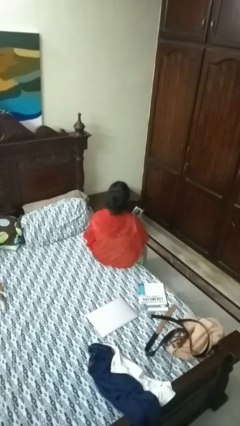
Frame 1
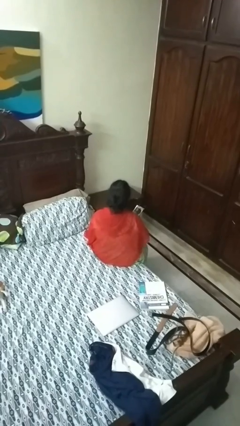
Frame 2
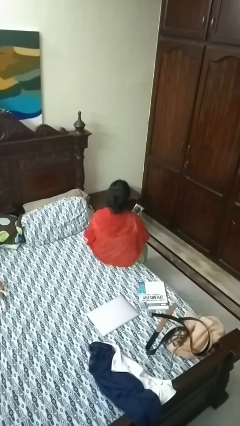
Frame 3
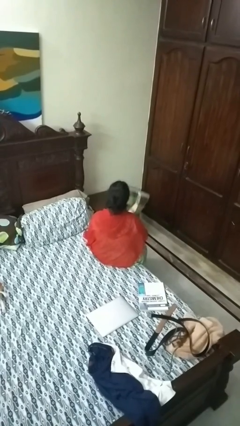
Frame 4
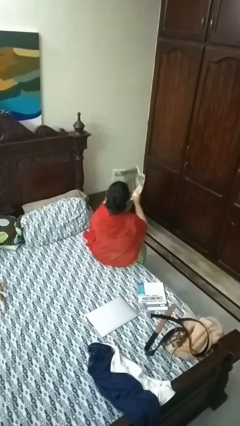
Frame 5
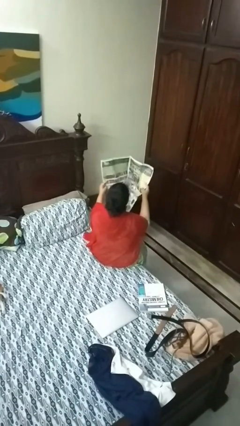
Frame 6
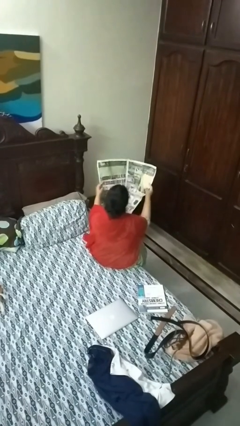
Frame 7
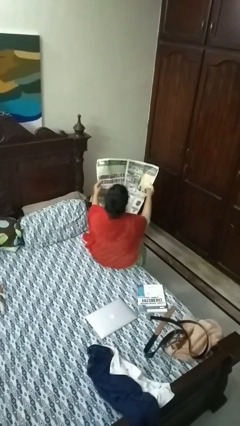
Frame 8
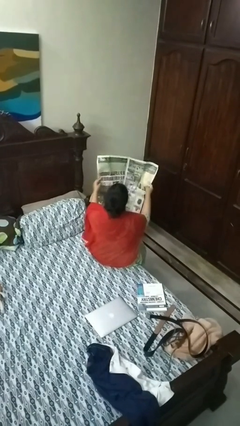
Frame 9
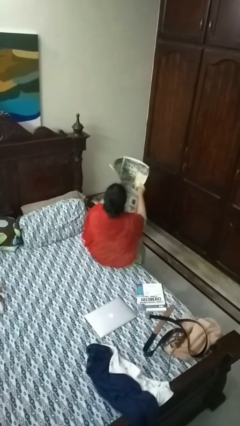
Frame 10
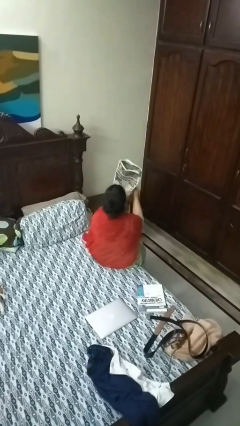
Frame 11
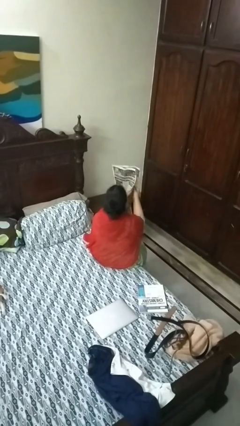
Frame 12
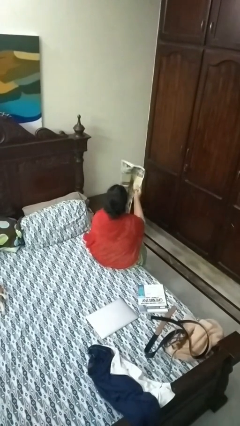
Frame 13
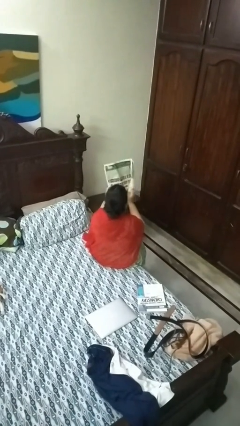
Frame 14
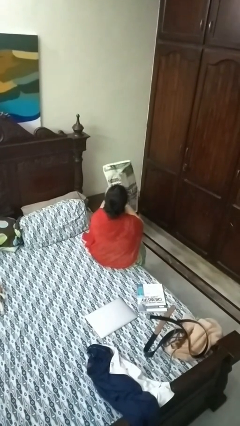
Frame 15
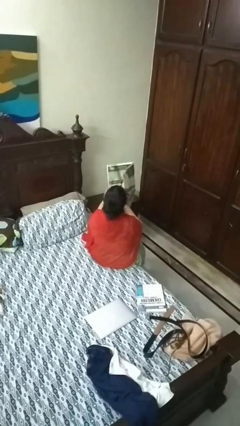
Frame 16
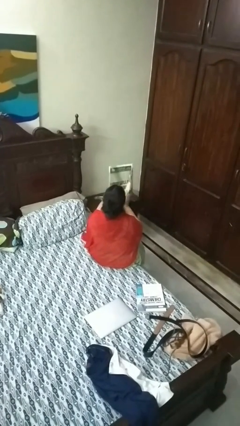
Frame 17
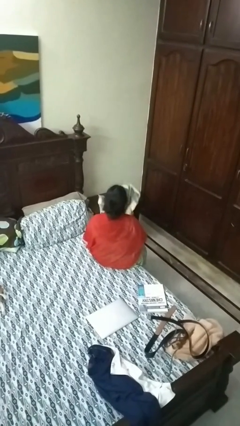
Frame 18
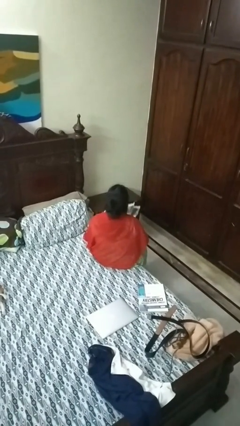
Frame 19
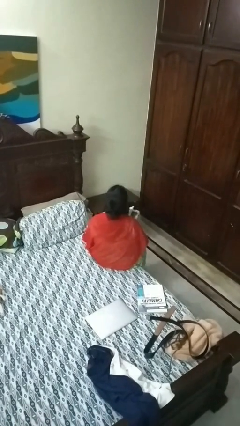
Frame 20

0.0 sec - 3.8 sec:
person reads newspaper

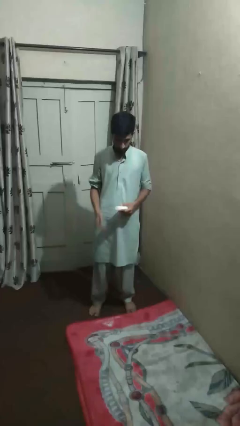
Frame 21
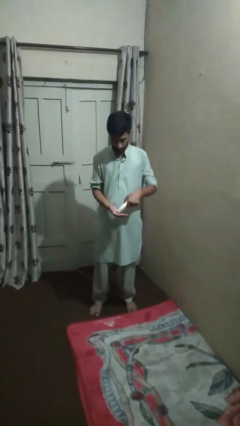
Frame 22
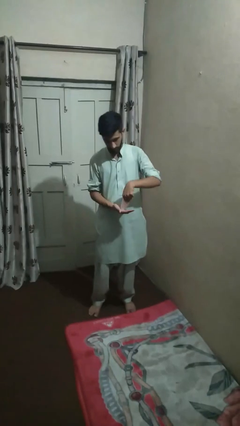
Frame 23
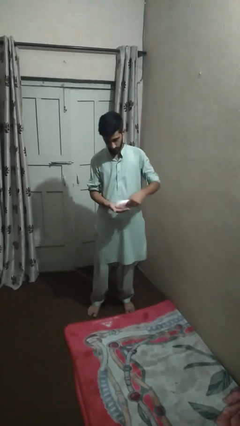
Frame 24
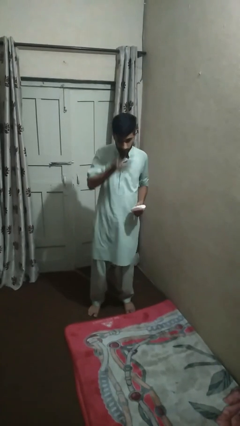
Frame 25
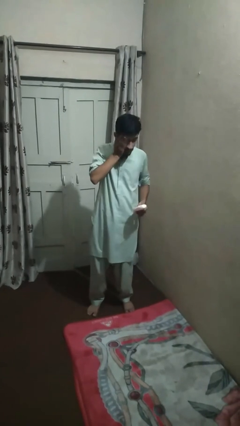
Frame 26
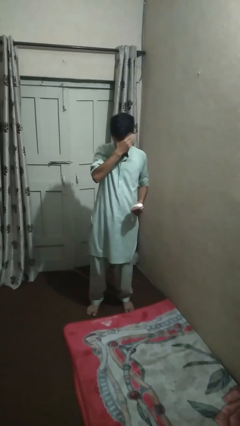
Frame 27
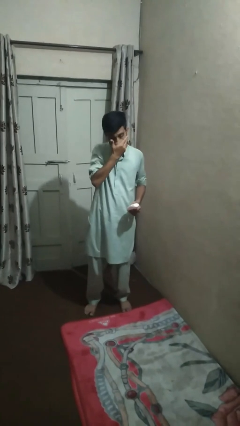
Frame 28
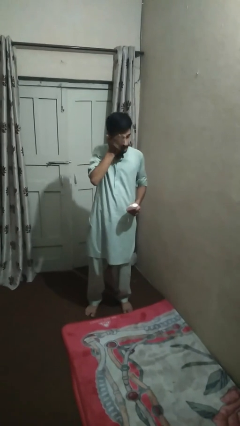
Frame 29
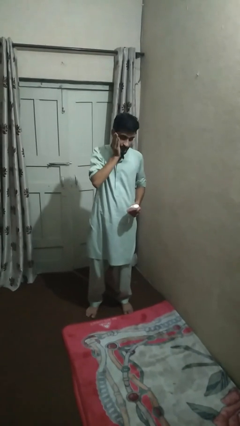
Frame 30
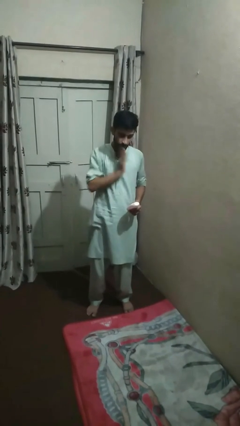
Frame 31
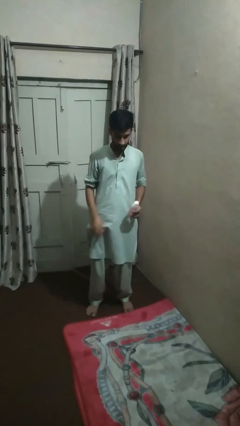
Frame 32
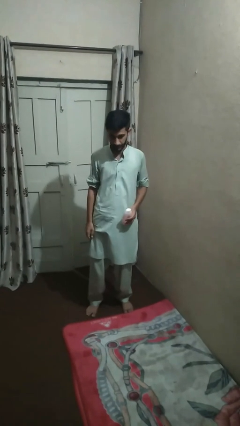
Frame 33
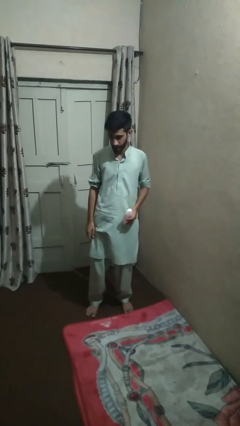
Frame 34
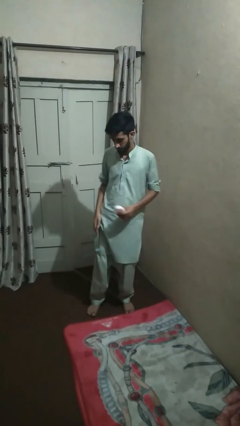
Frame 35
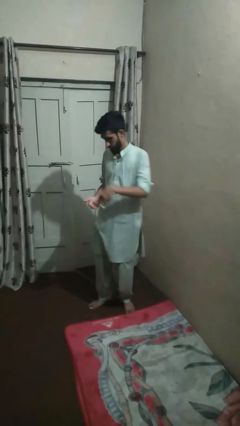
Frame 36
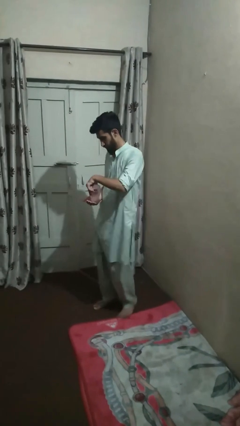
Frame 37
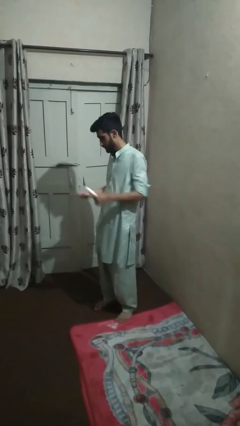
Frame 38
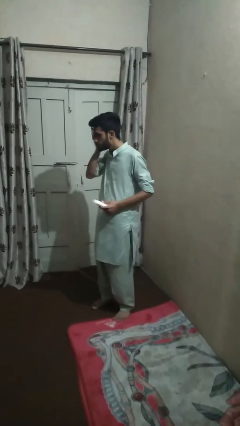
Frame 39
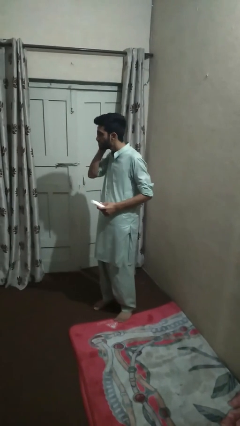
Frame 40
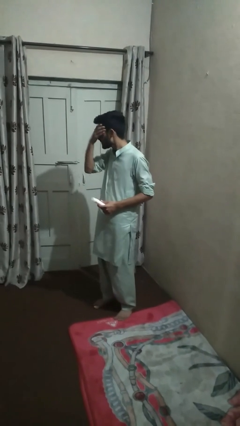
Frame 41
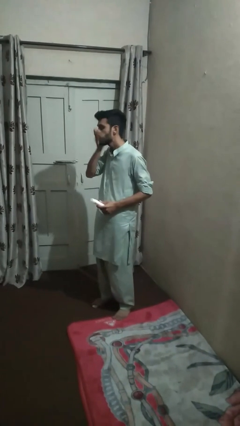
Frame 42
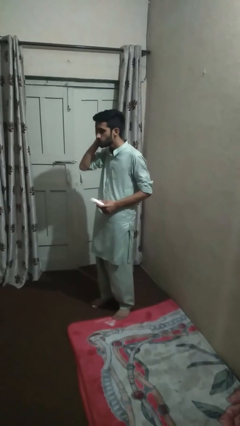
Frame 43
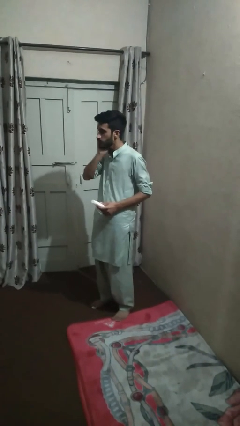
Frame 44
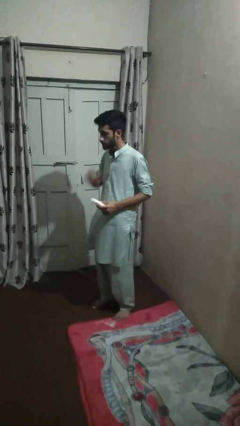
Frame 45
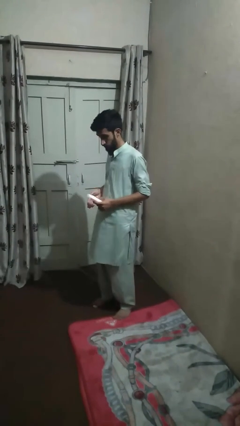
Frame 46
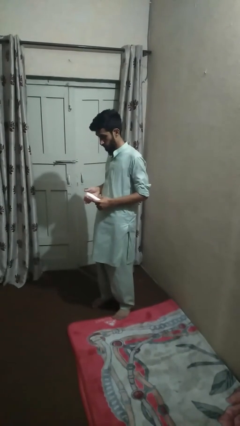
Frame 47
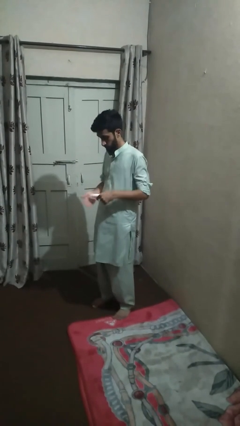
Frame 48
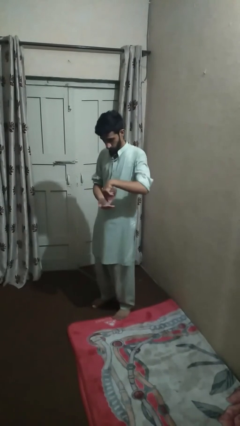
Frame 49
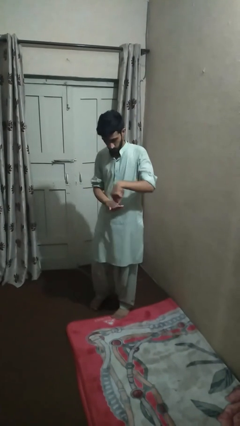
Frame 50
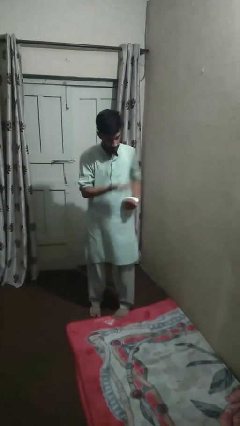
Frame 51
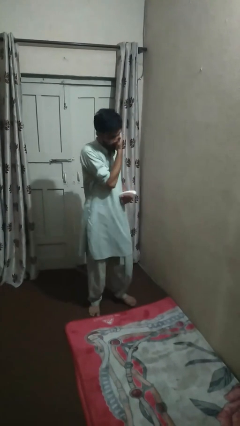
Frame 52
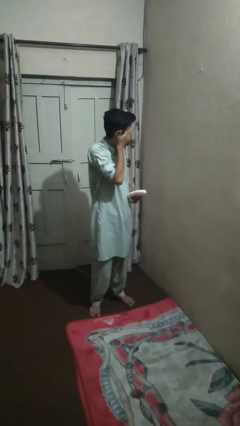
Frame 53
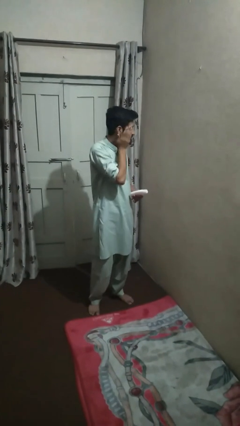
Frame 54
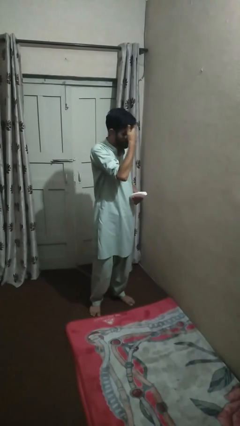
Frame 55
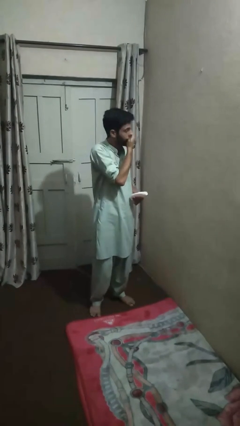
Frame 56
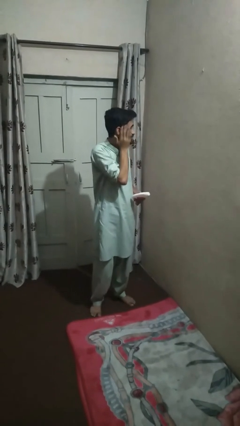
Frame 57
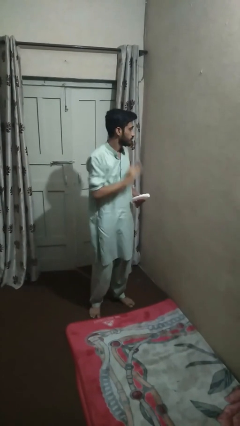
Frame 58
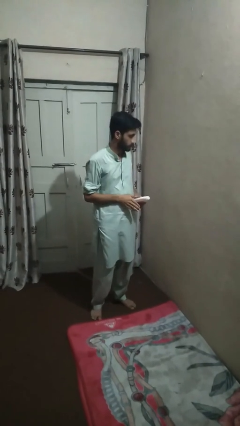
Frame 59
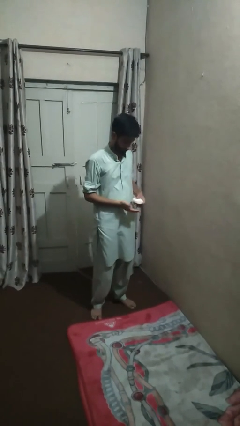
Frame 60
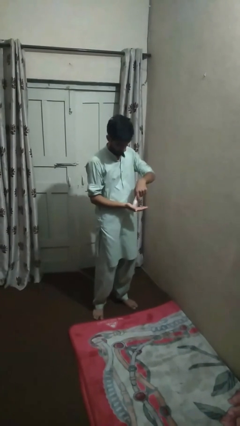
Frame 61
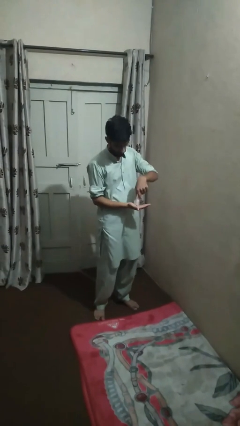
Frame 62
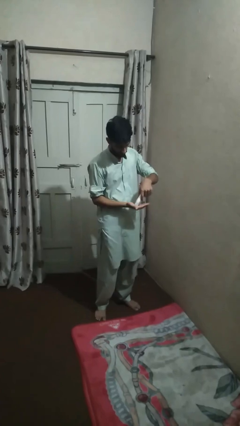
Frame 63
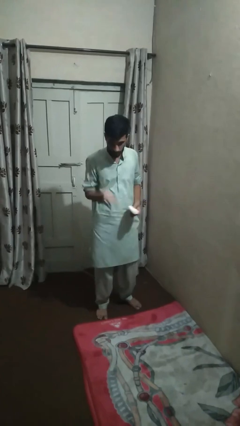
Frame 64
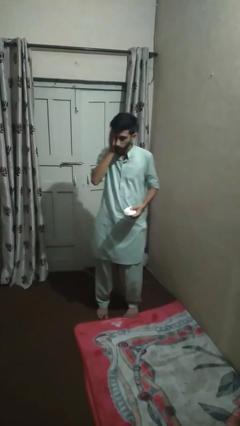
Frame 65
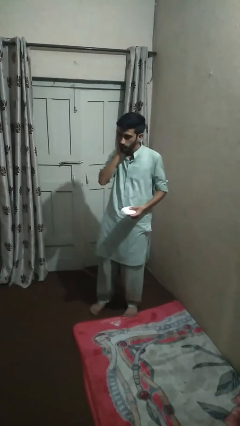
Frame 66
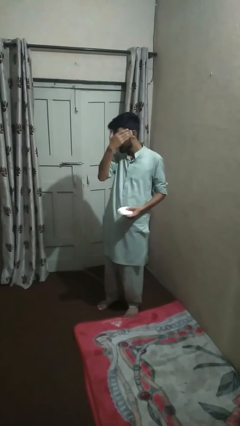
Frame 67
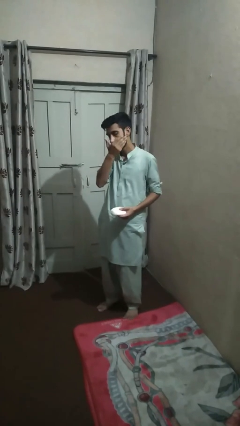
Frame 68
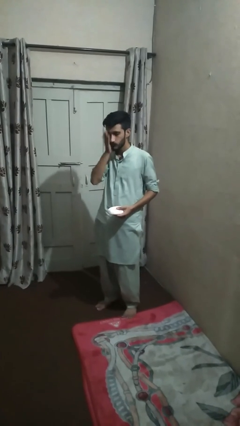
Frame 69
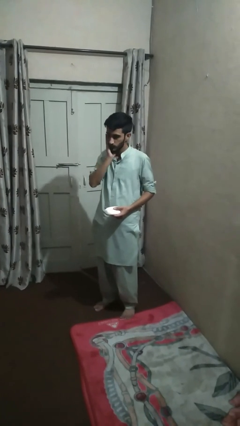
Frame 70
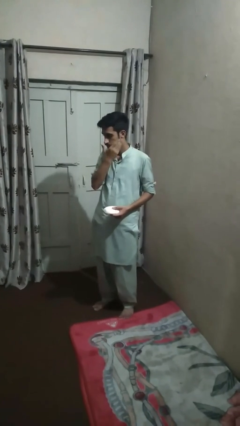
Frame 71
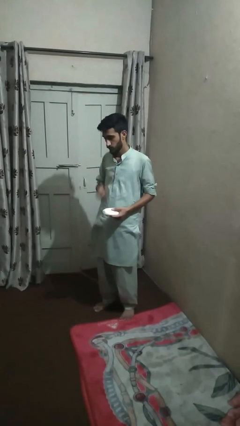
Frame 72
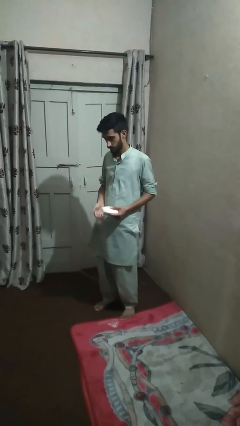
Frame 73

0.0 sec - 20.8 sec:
person applies facial moisturizer

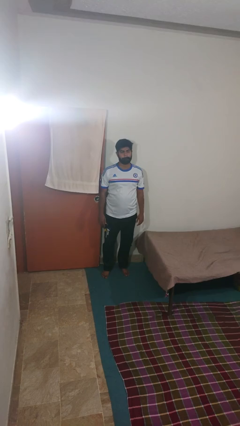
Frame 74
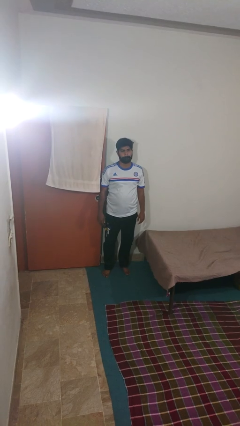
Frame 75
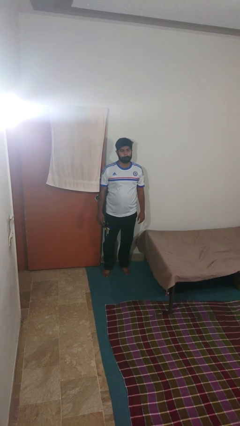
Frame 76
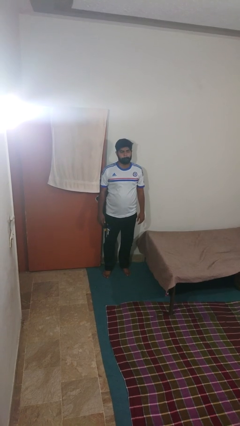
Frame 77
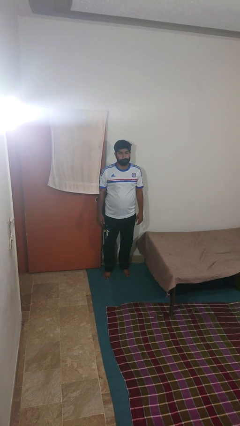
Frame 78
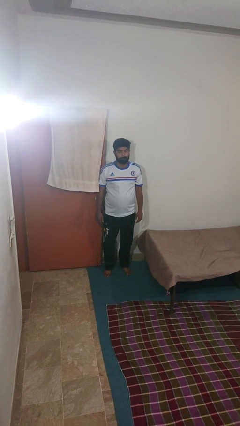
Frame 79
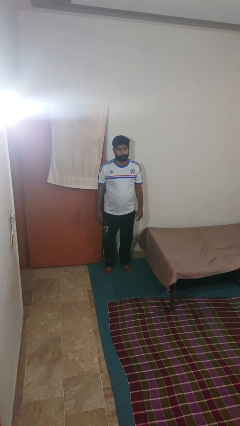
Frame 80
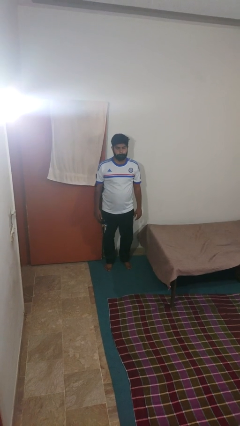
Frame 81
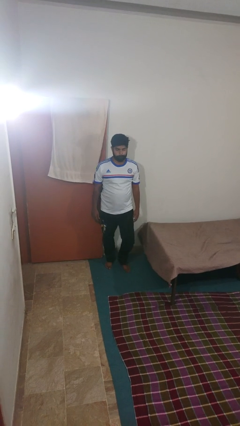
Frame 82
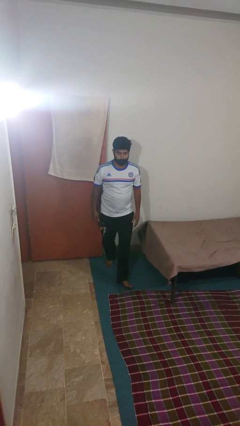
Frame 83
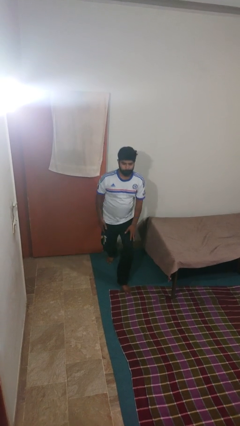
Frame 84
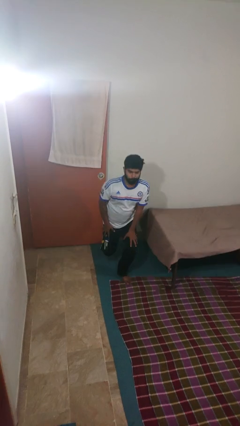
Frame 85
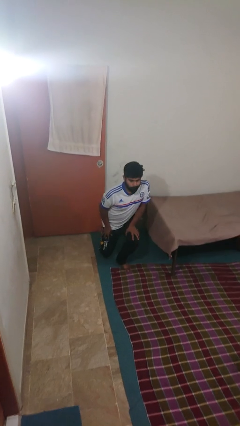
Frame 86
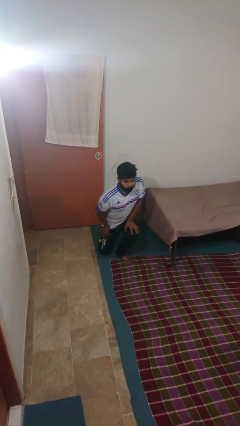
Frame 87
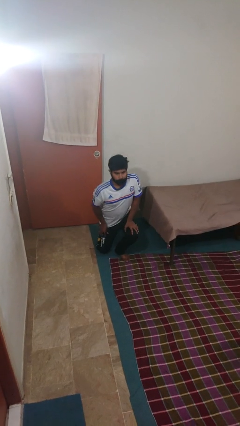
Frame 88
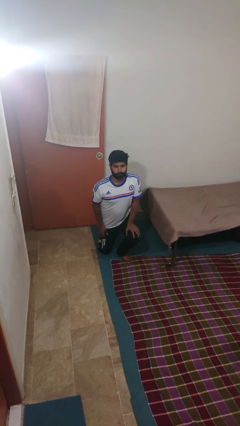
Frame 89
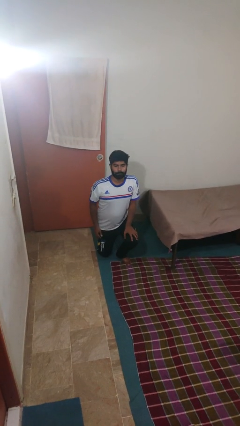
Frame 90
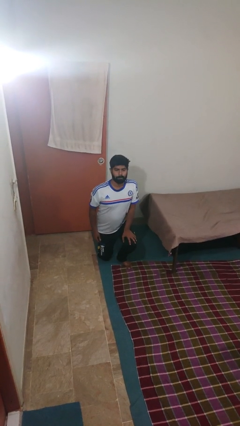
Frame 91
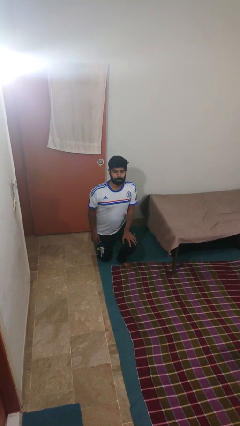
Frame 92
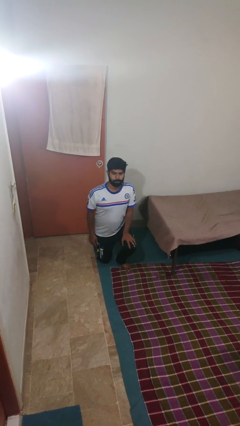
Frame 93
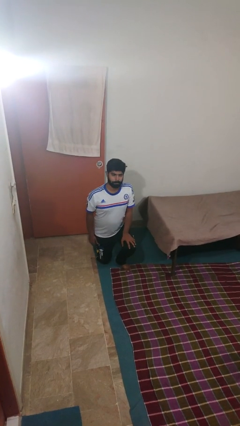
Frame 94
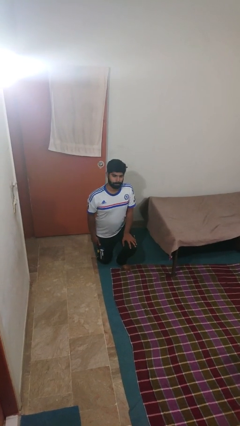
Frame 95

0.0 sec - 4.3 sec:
person kneels
